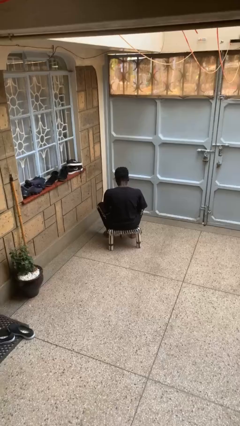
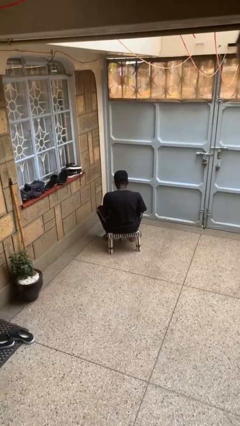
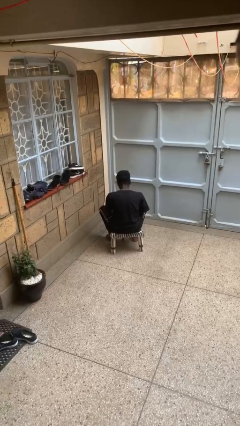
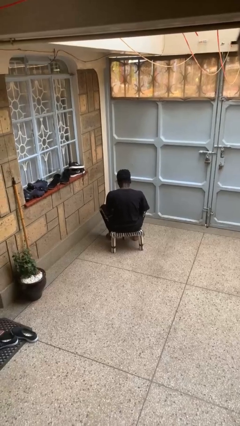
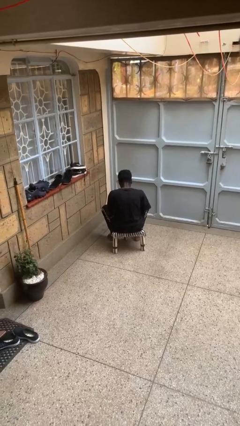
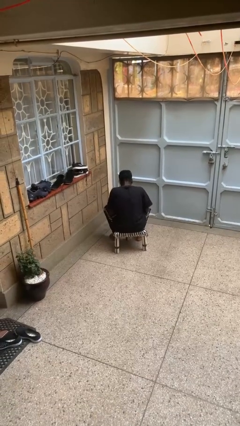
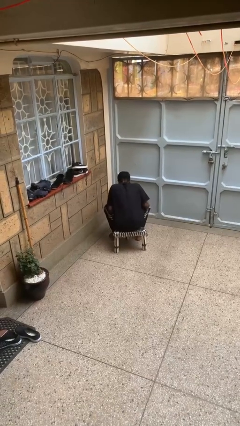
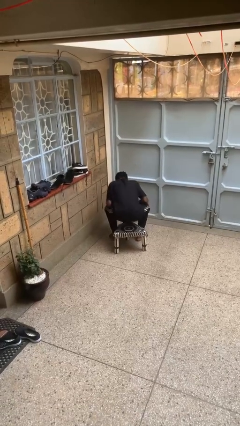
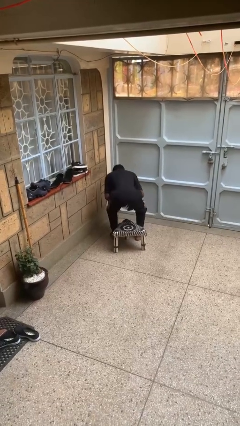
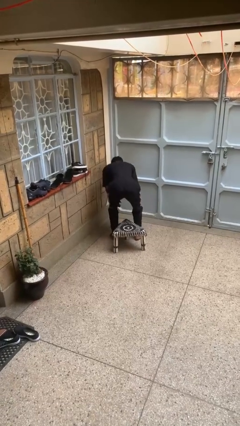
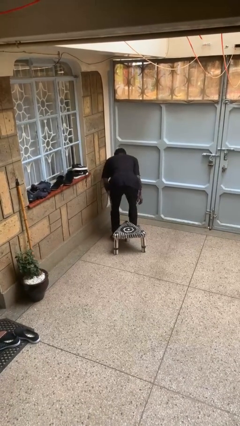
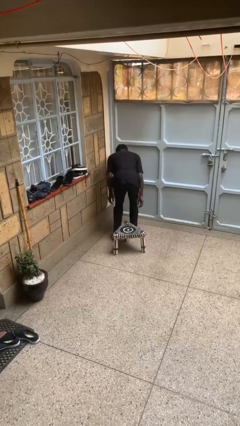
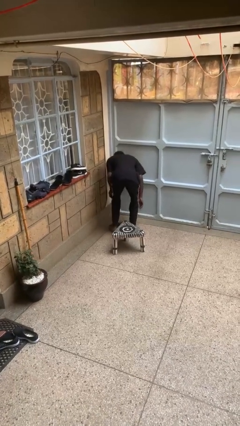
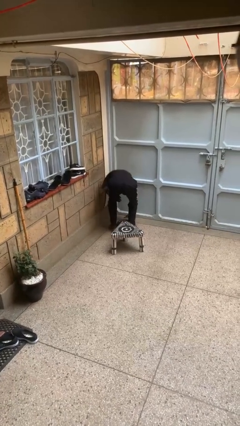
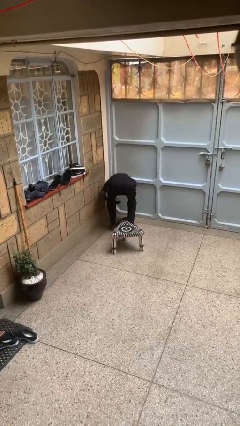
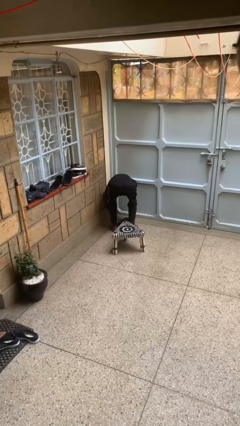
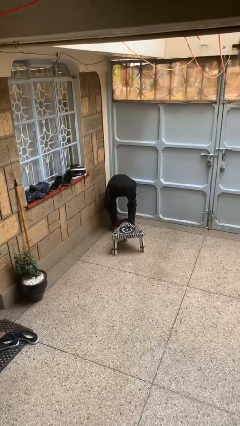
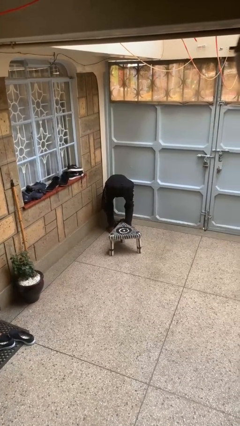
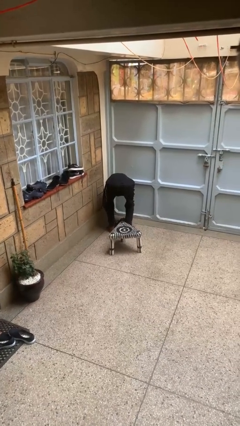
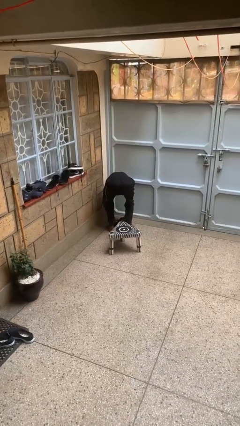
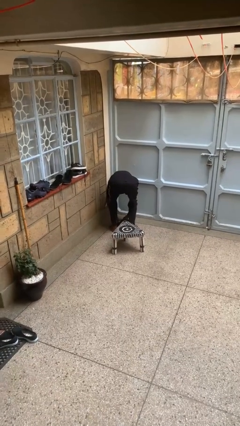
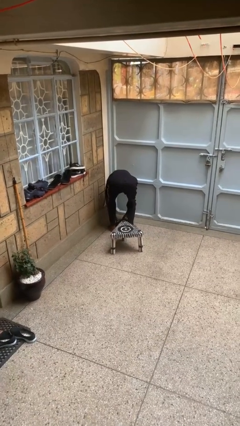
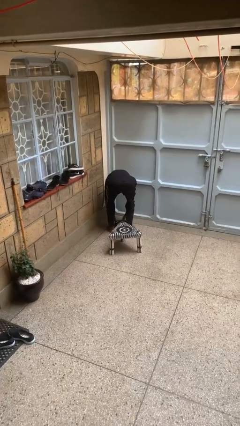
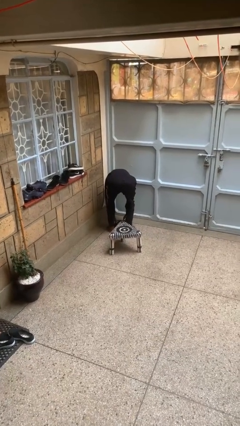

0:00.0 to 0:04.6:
person falls from chair

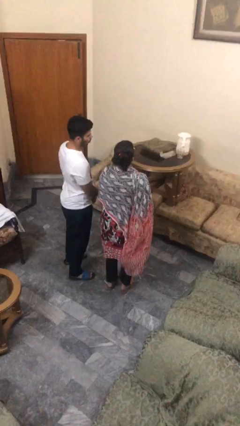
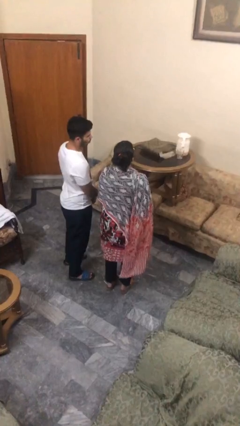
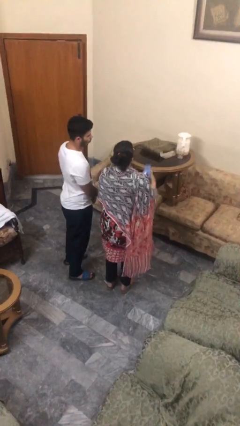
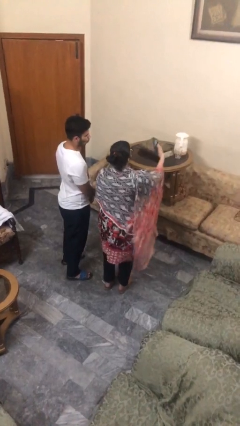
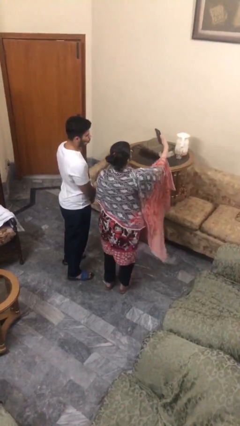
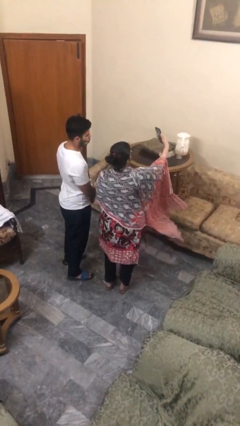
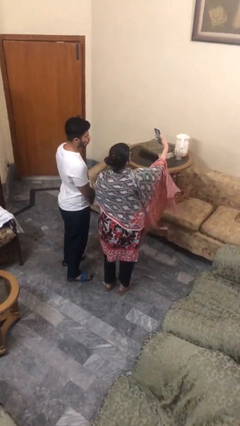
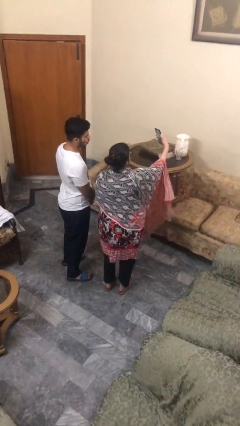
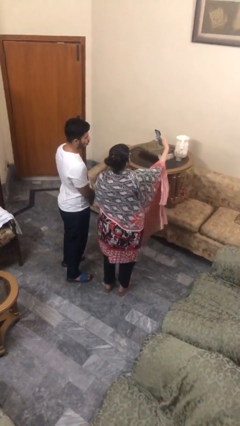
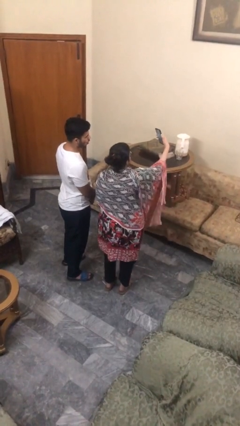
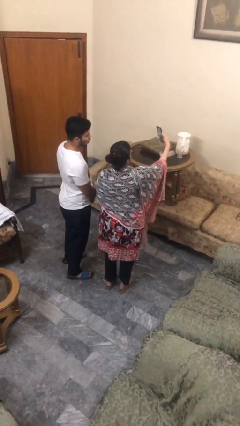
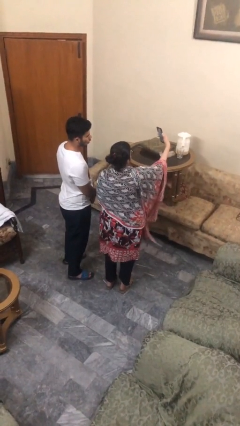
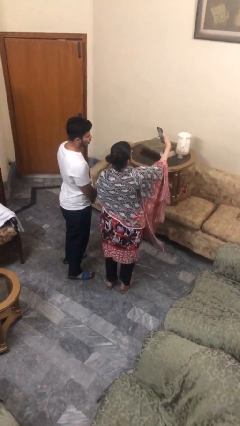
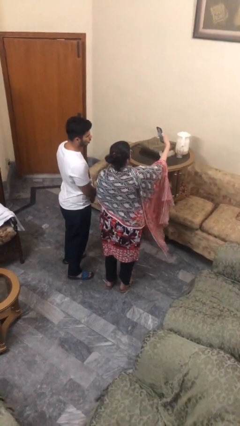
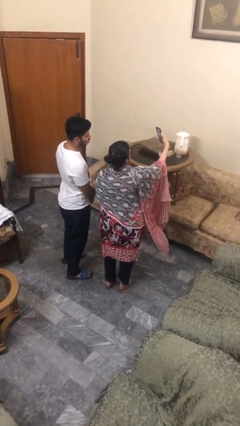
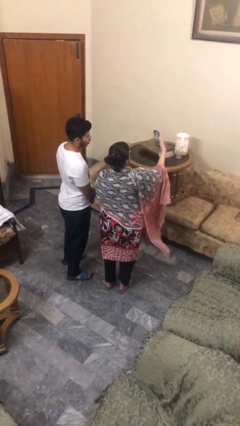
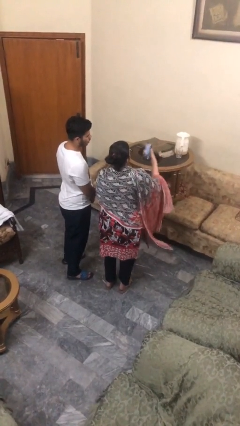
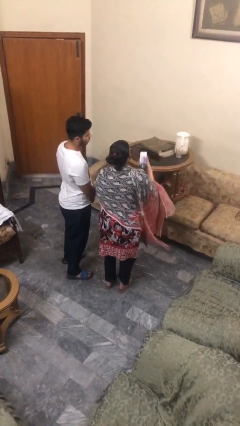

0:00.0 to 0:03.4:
person takes selfie with person

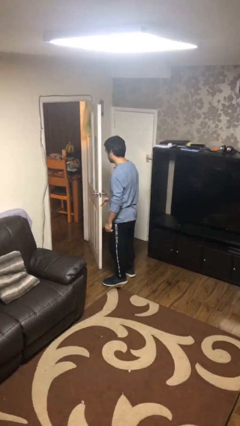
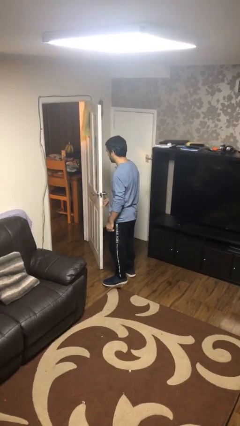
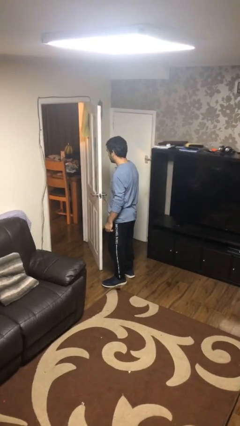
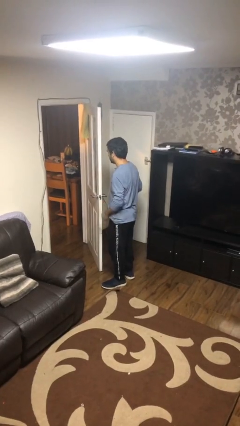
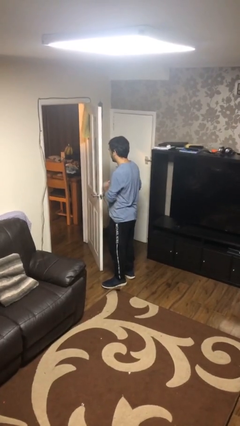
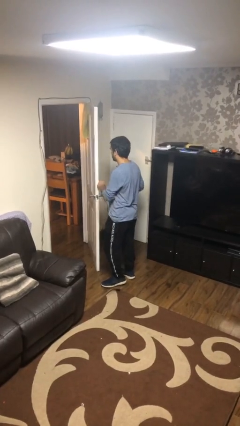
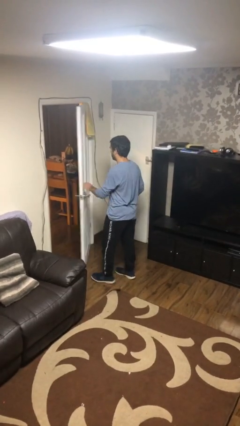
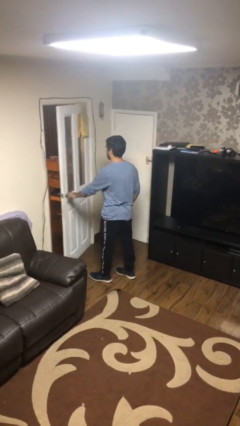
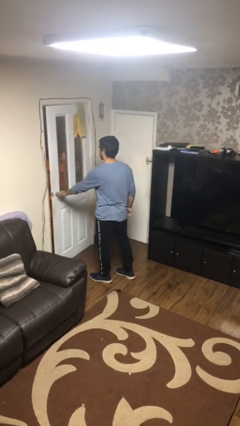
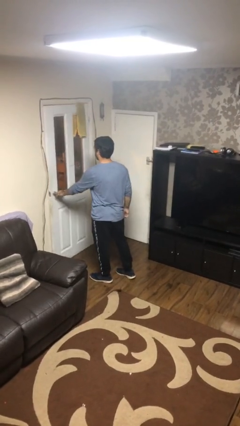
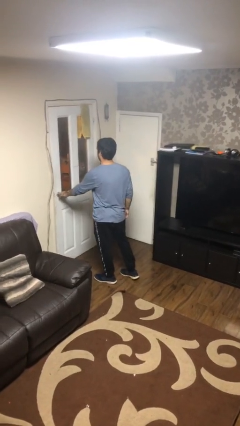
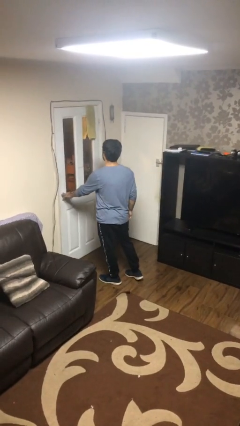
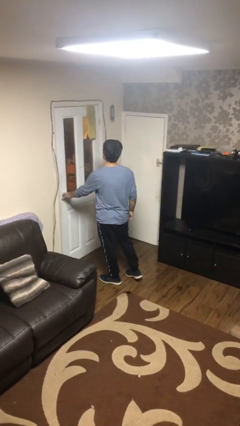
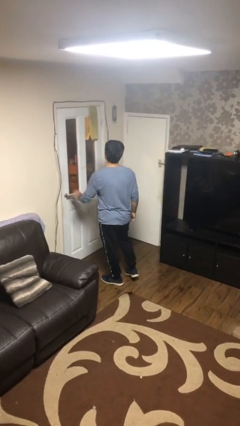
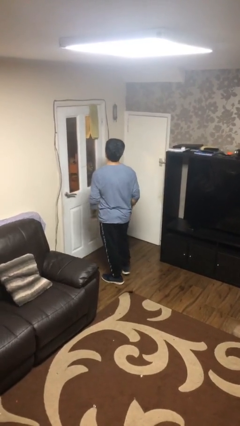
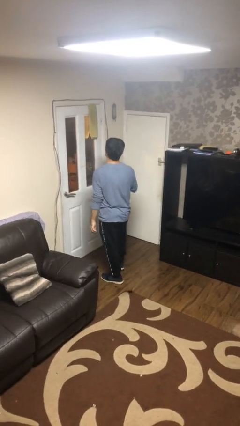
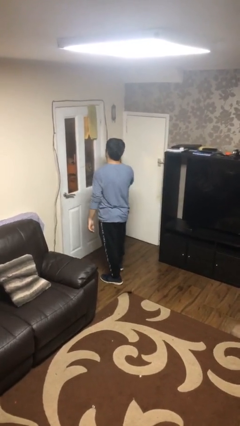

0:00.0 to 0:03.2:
person closes facility door

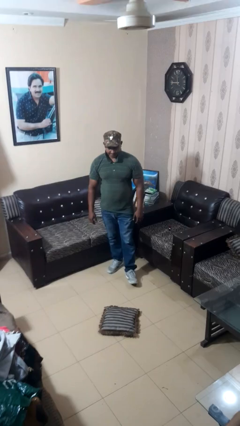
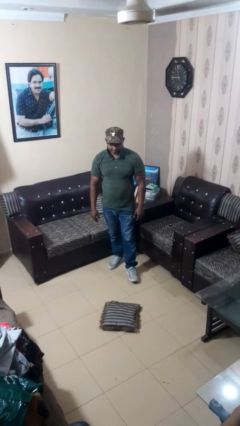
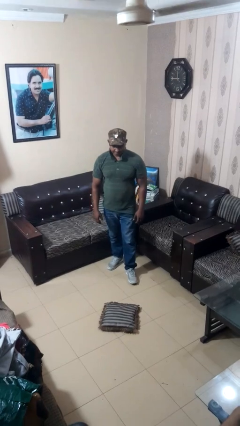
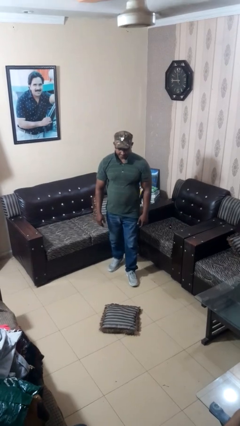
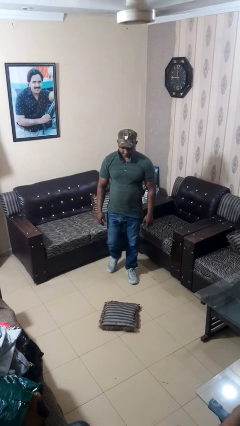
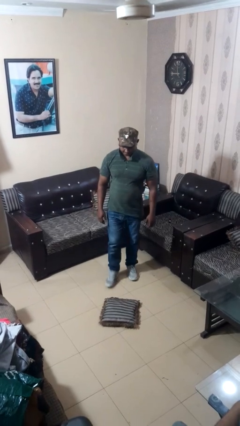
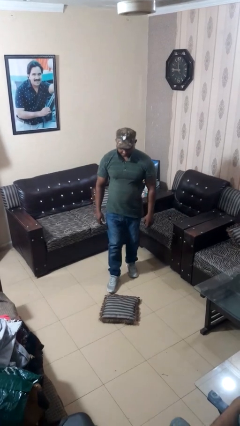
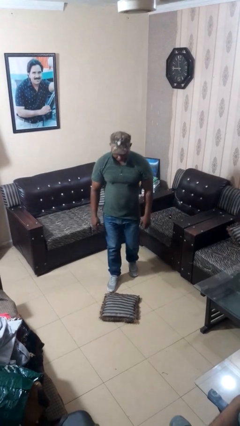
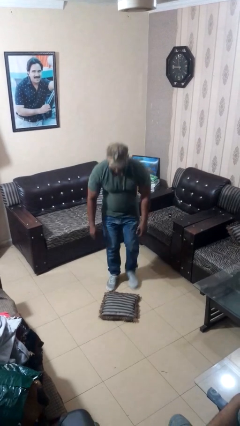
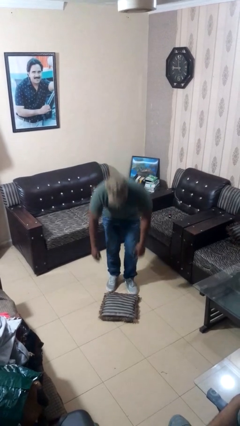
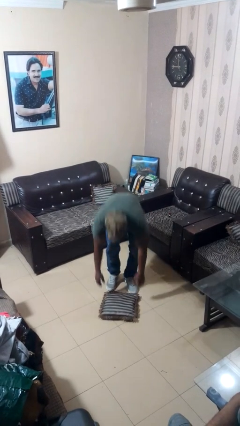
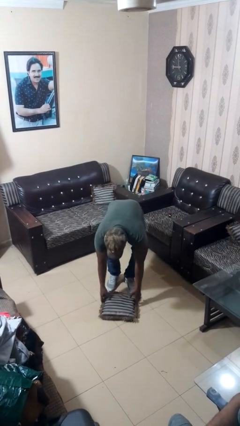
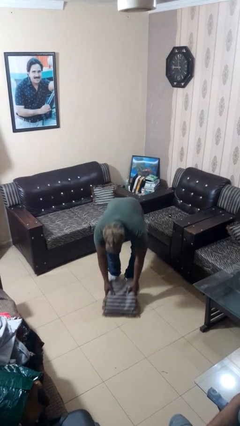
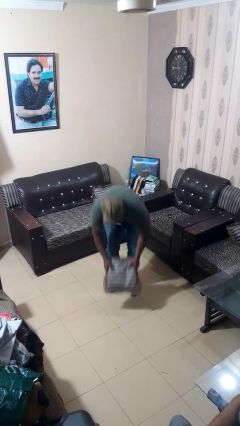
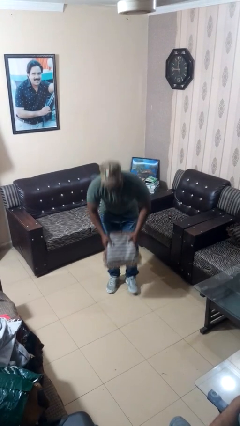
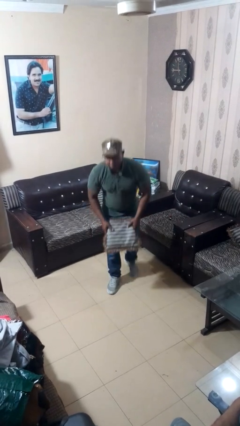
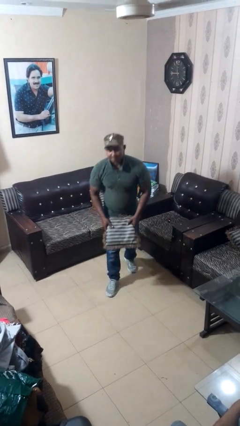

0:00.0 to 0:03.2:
person picks up object from floor

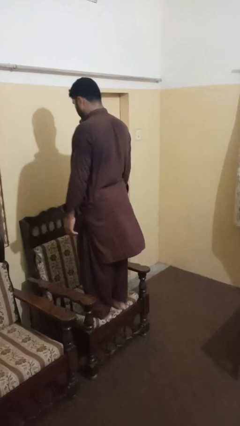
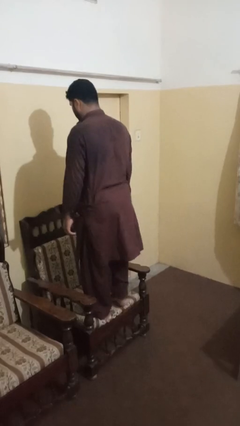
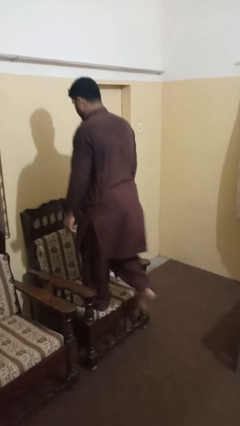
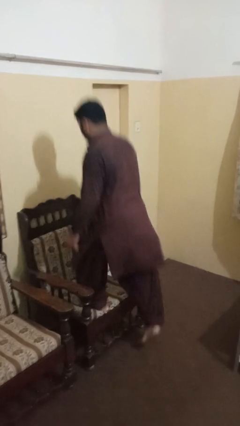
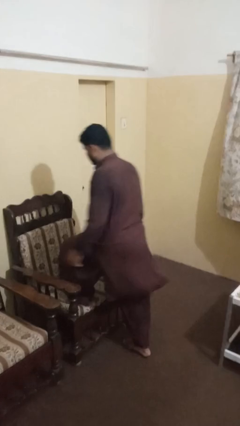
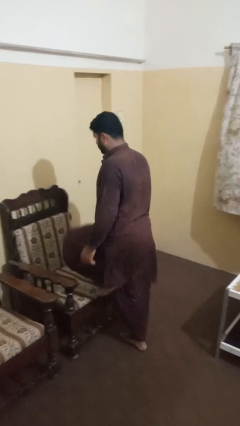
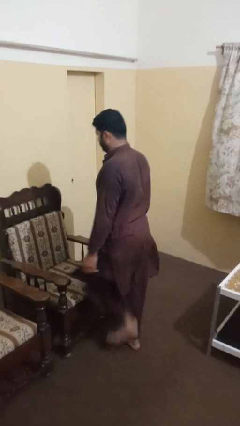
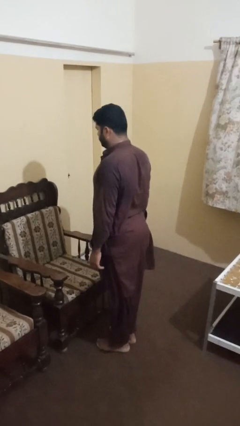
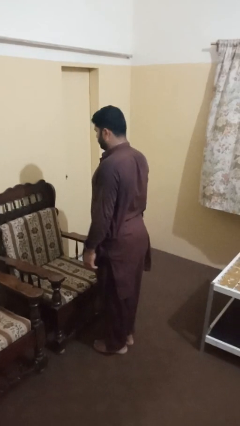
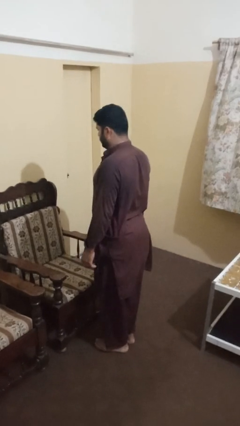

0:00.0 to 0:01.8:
person climbs off chair

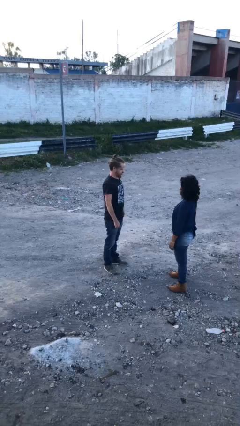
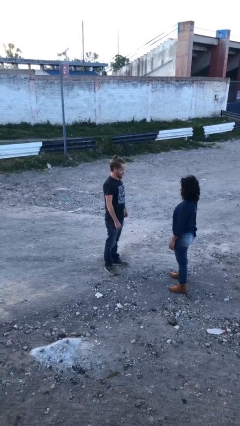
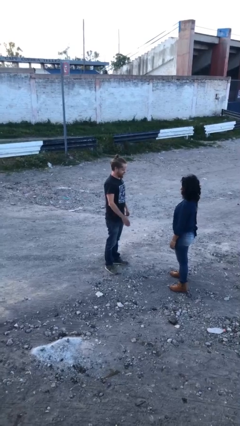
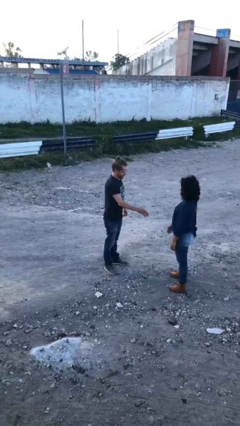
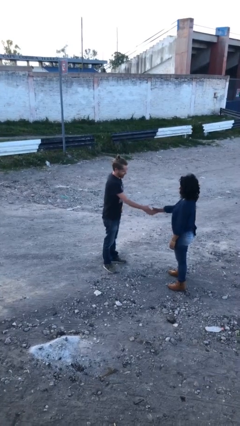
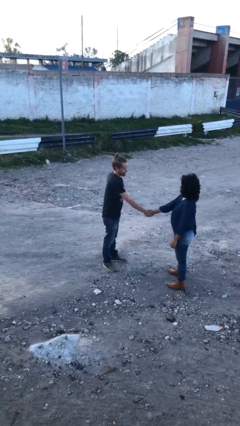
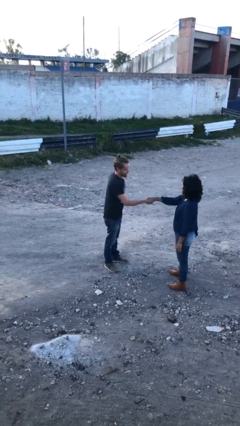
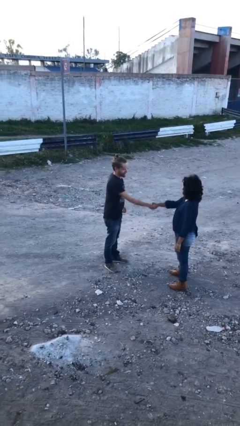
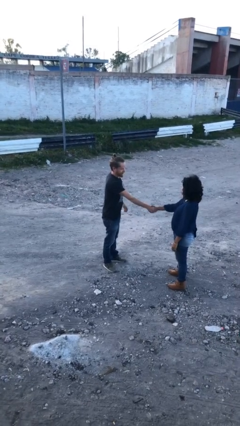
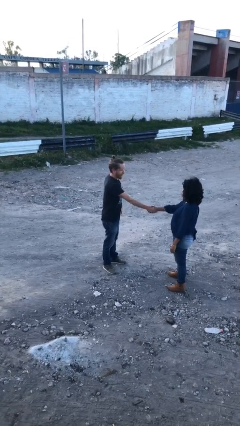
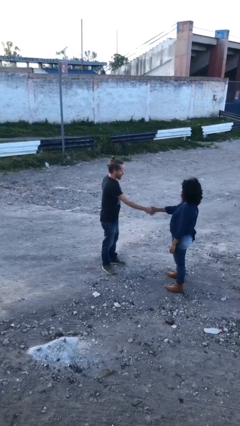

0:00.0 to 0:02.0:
person shakes hand
